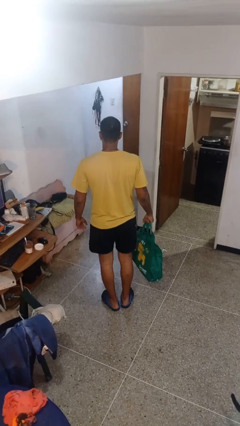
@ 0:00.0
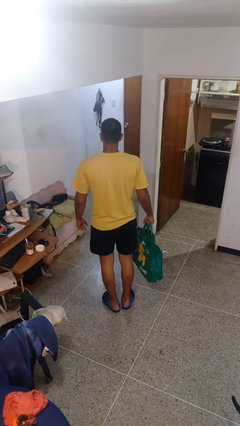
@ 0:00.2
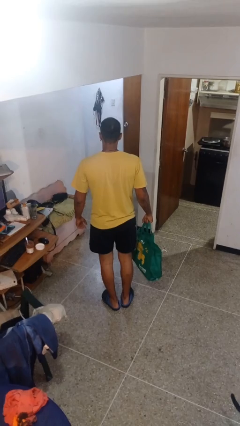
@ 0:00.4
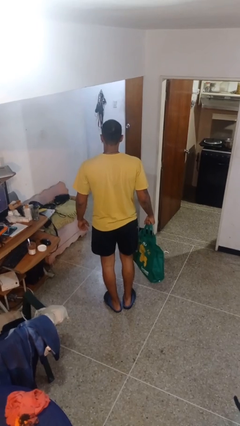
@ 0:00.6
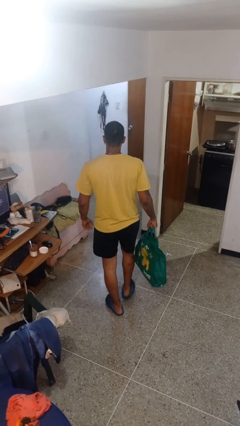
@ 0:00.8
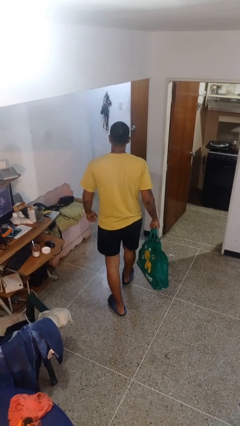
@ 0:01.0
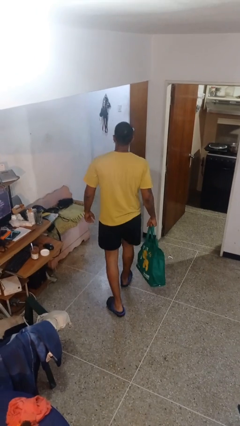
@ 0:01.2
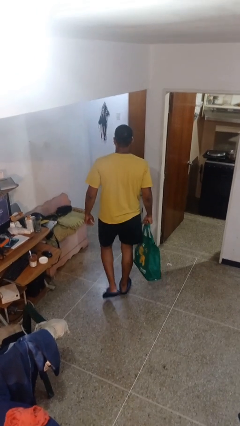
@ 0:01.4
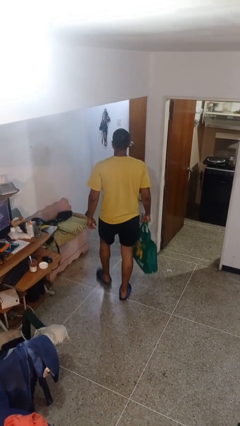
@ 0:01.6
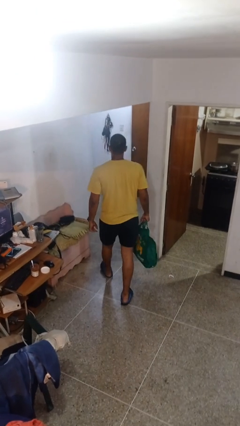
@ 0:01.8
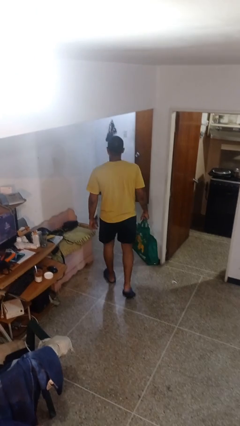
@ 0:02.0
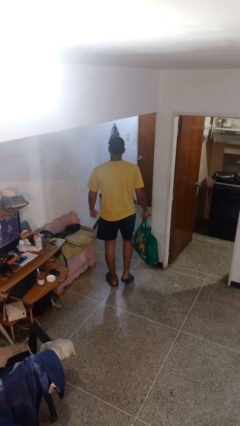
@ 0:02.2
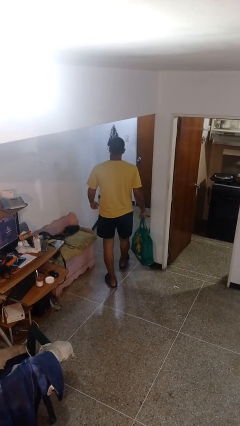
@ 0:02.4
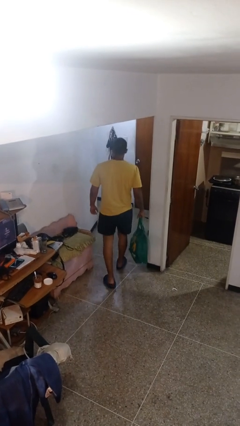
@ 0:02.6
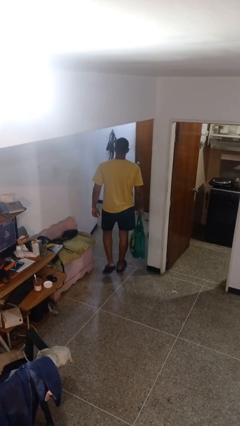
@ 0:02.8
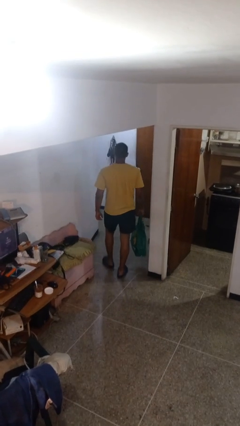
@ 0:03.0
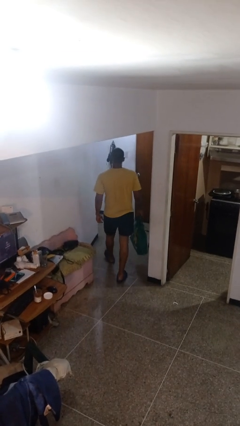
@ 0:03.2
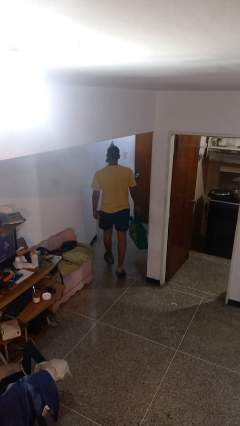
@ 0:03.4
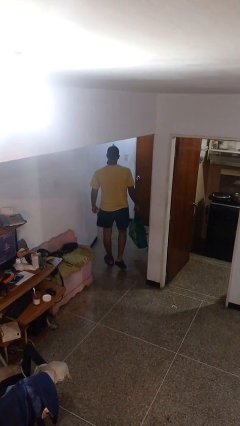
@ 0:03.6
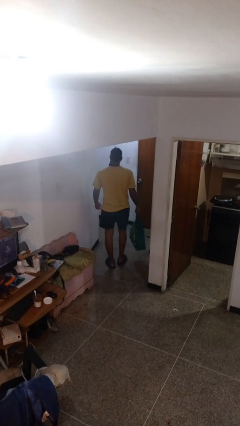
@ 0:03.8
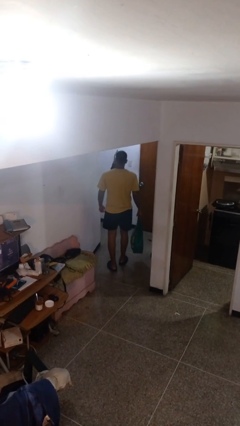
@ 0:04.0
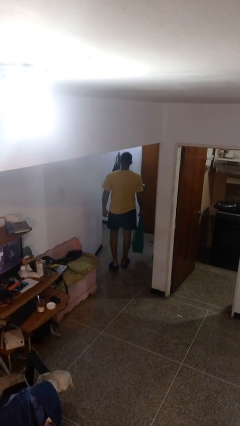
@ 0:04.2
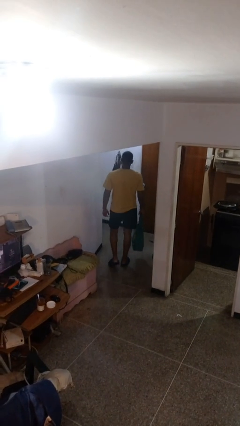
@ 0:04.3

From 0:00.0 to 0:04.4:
person carries groceries

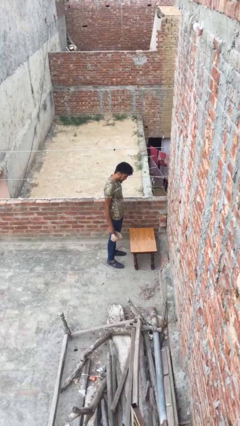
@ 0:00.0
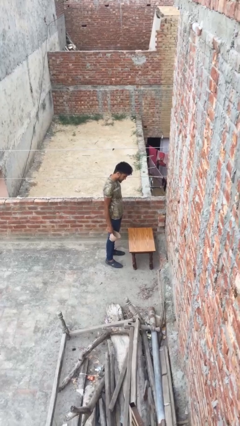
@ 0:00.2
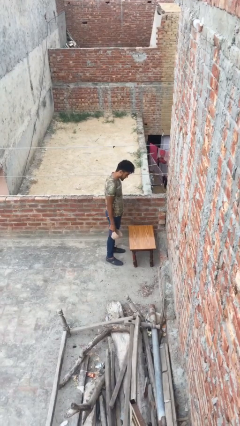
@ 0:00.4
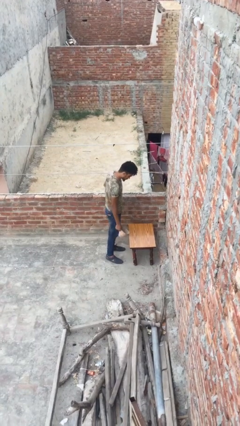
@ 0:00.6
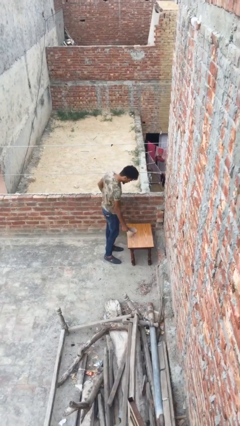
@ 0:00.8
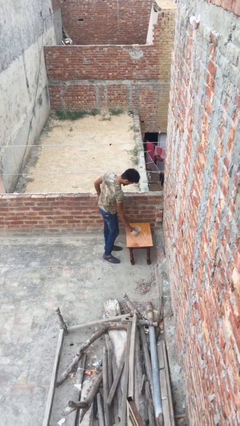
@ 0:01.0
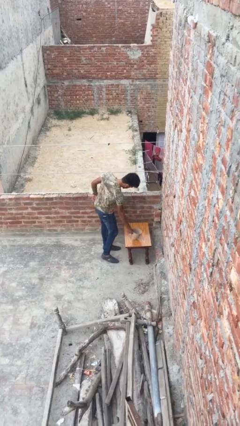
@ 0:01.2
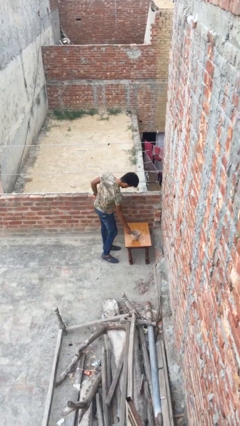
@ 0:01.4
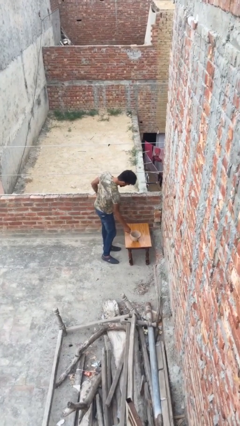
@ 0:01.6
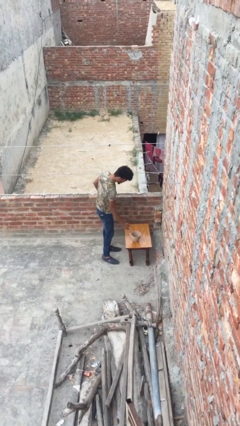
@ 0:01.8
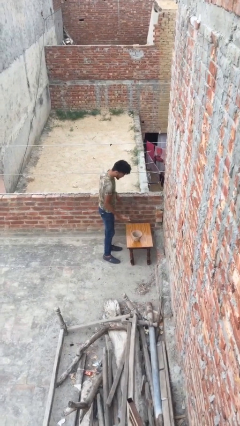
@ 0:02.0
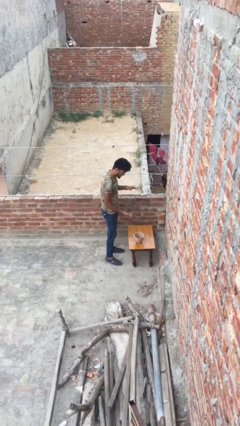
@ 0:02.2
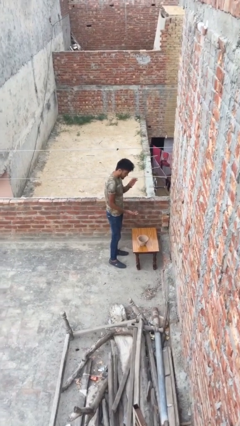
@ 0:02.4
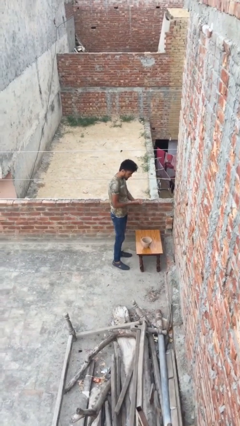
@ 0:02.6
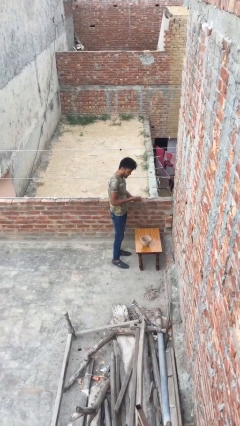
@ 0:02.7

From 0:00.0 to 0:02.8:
person puts down object on table

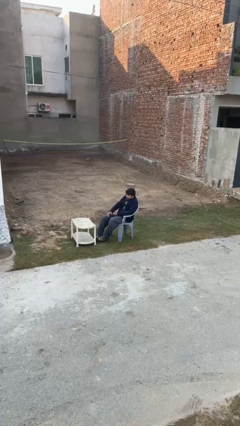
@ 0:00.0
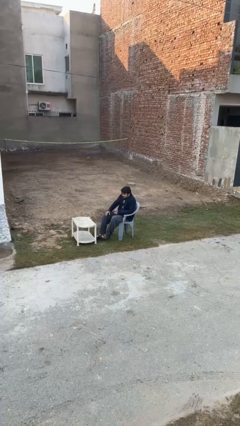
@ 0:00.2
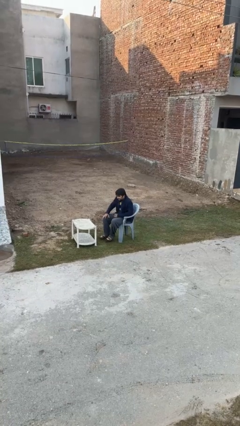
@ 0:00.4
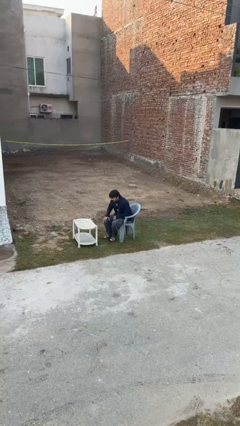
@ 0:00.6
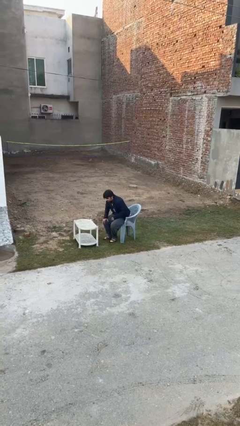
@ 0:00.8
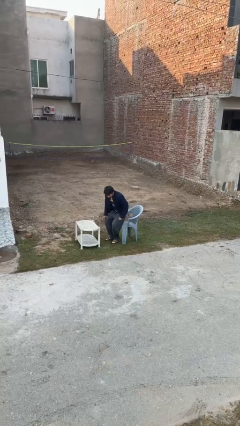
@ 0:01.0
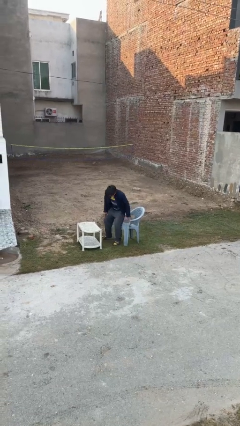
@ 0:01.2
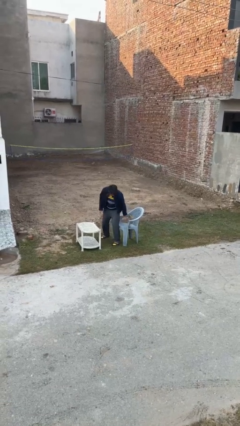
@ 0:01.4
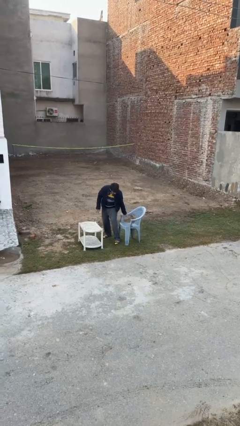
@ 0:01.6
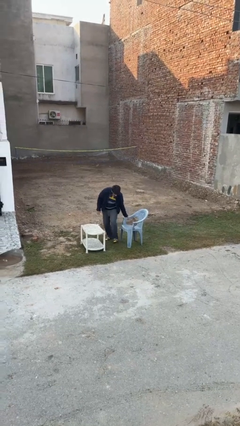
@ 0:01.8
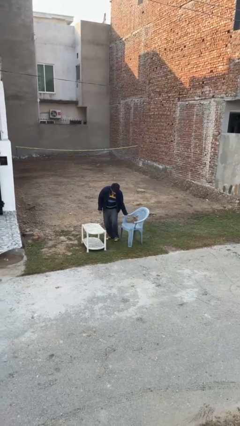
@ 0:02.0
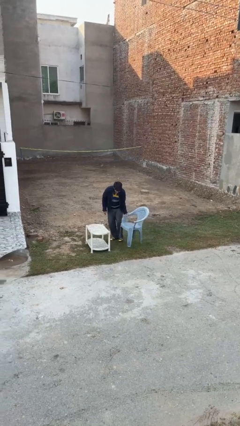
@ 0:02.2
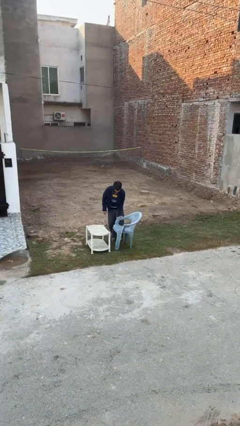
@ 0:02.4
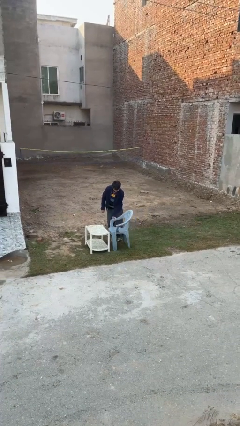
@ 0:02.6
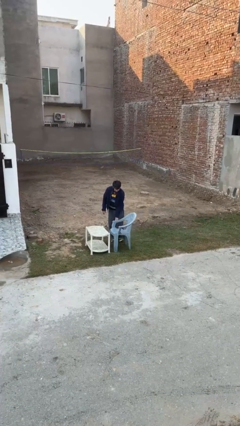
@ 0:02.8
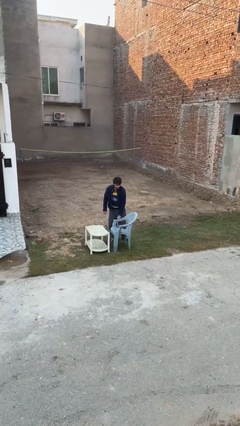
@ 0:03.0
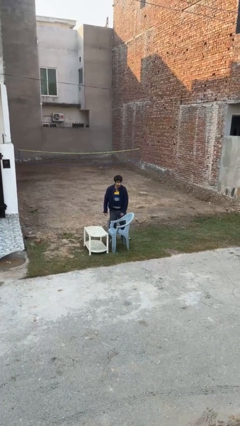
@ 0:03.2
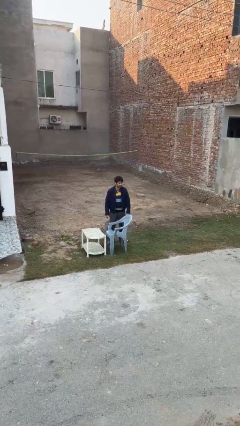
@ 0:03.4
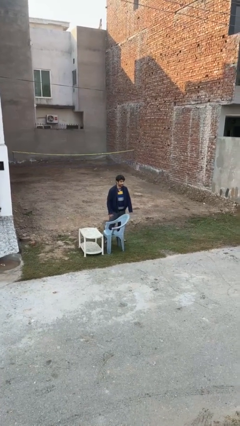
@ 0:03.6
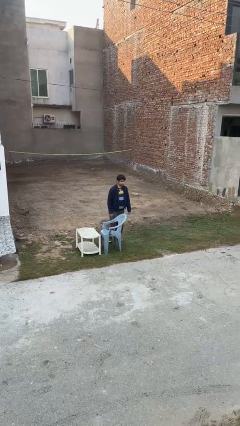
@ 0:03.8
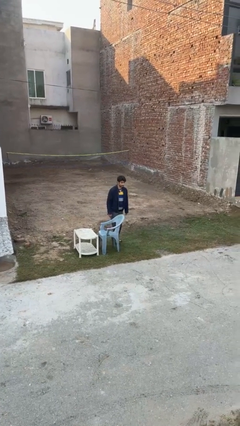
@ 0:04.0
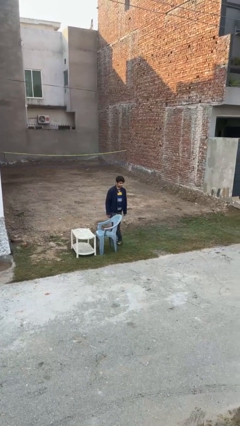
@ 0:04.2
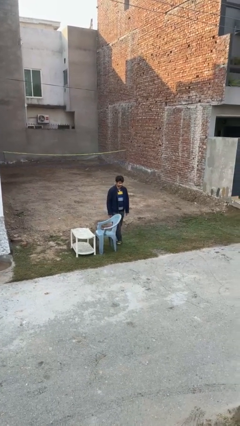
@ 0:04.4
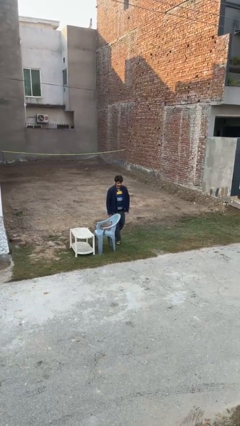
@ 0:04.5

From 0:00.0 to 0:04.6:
person stands up

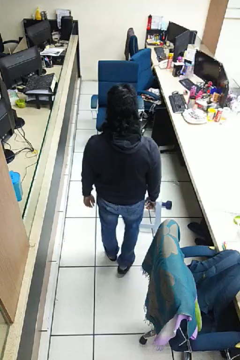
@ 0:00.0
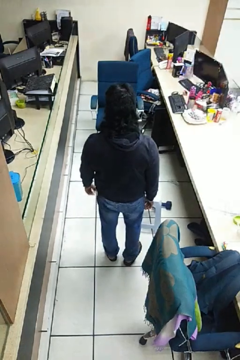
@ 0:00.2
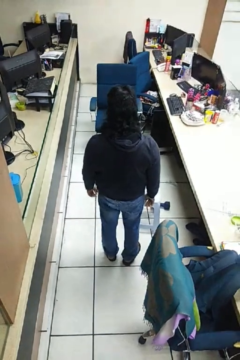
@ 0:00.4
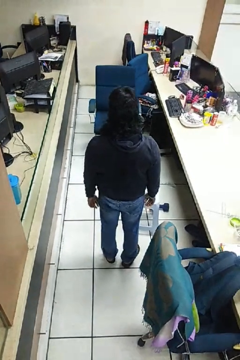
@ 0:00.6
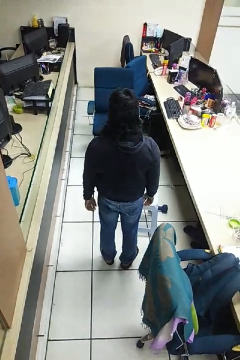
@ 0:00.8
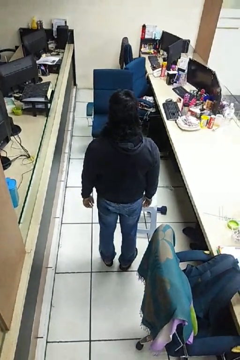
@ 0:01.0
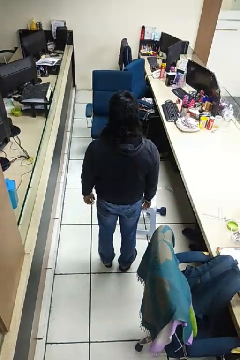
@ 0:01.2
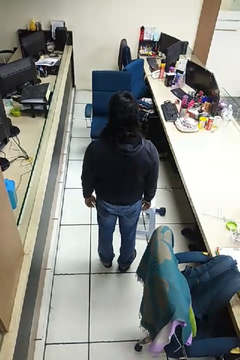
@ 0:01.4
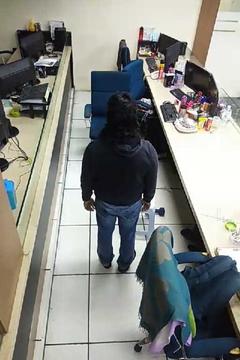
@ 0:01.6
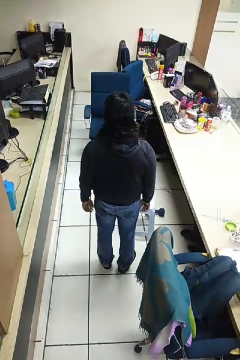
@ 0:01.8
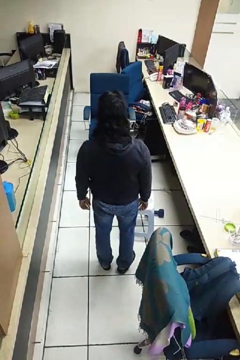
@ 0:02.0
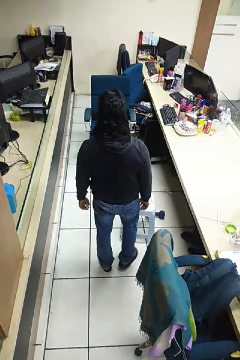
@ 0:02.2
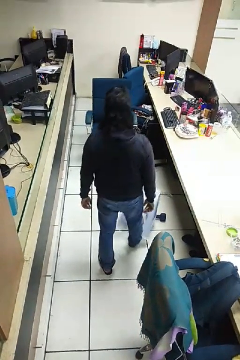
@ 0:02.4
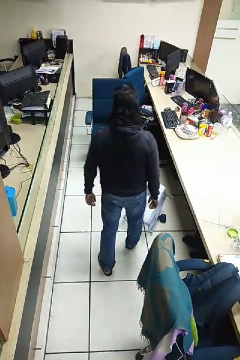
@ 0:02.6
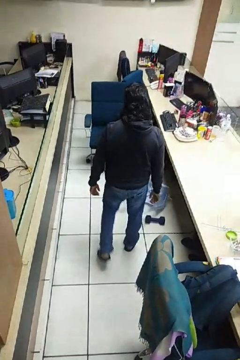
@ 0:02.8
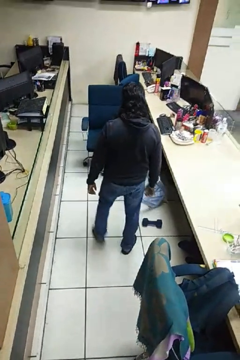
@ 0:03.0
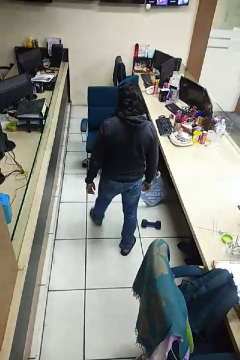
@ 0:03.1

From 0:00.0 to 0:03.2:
person knocks over furniture

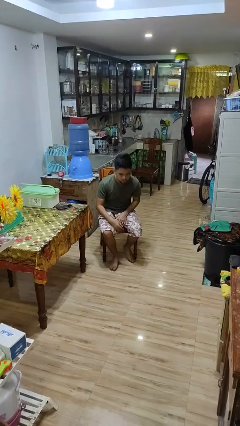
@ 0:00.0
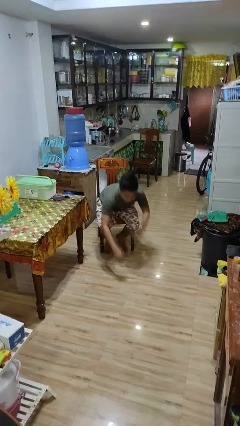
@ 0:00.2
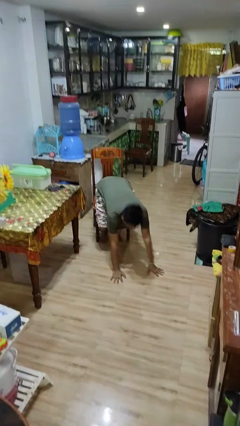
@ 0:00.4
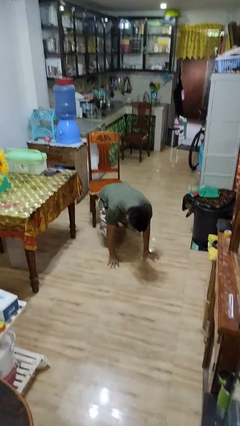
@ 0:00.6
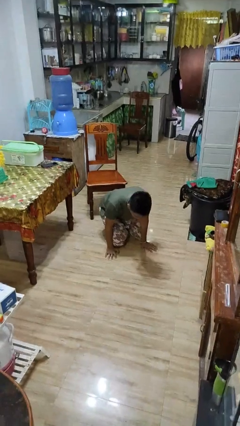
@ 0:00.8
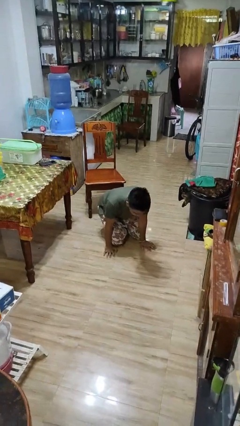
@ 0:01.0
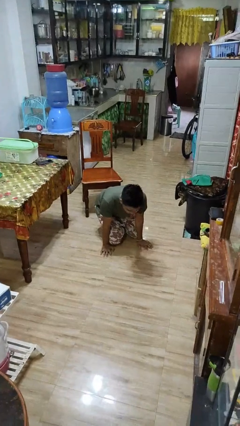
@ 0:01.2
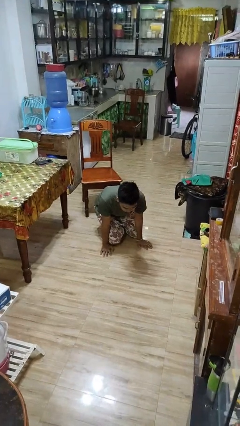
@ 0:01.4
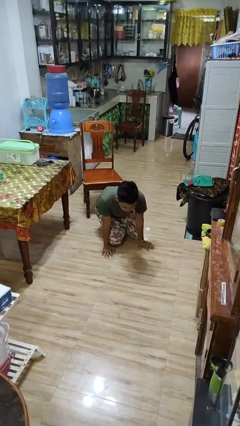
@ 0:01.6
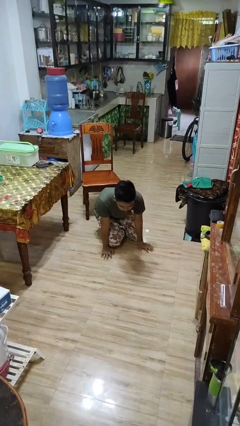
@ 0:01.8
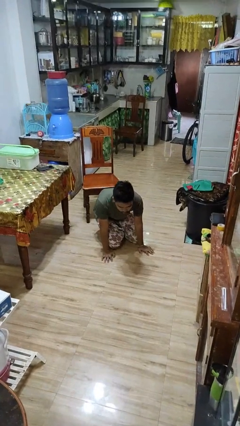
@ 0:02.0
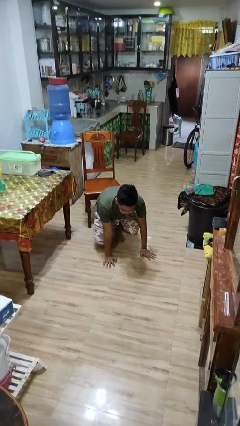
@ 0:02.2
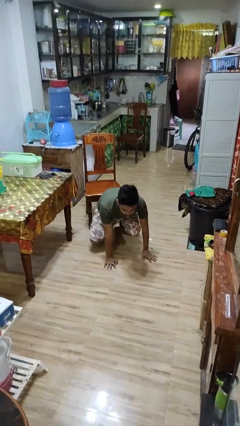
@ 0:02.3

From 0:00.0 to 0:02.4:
person falls from chair

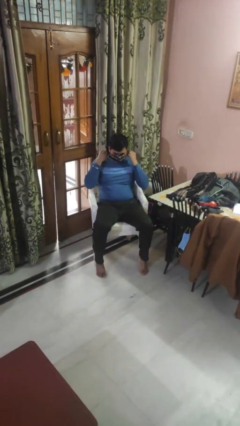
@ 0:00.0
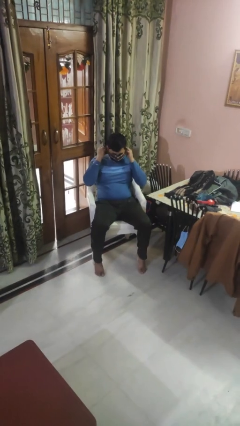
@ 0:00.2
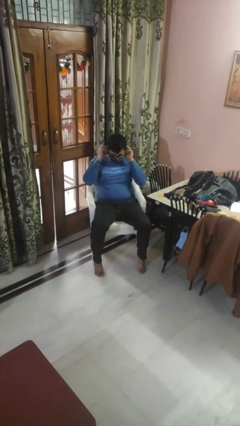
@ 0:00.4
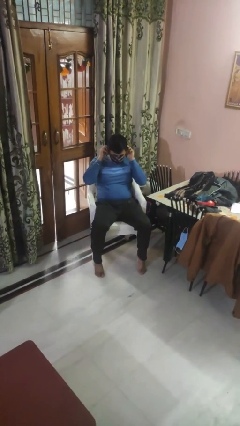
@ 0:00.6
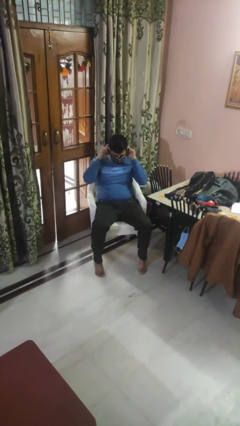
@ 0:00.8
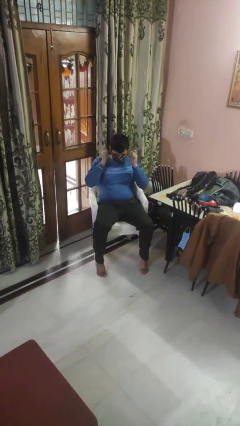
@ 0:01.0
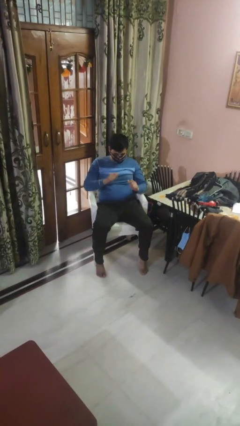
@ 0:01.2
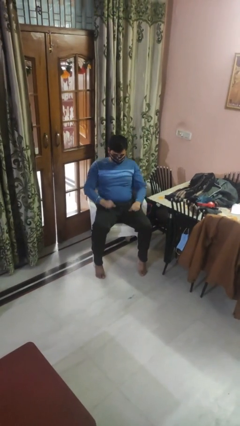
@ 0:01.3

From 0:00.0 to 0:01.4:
person puts on facemask
